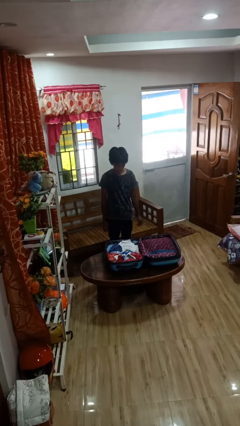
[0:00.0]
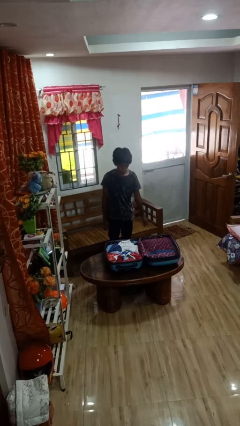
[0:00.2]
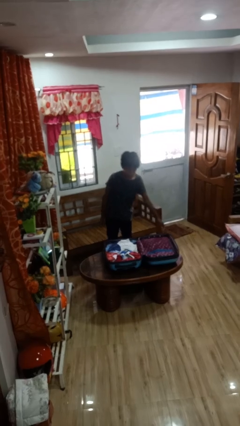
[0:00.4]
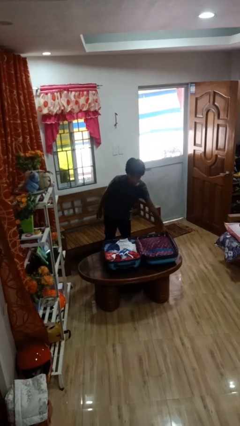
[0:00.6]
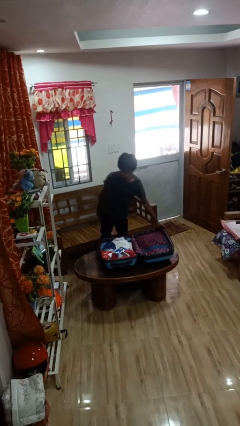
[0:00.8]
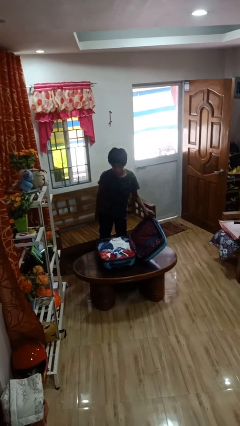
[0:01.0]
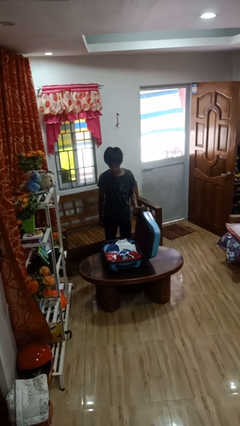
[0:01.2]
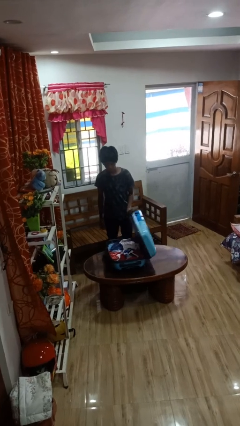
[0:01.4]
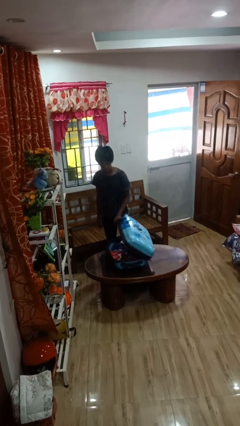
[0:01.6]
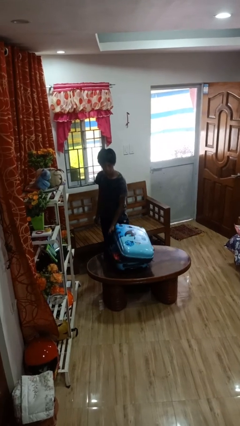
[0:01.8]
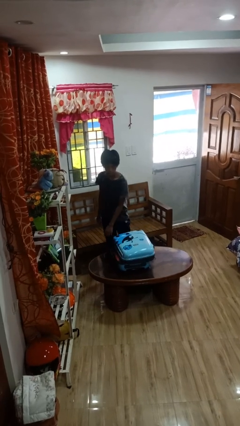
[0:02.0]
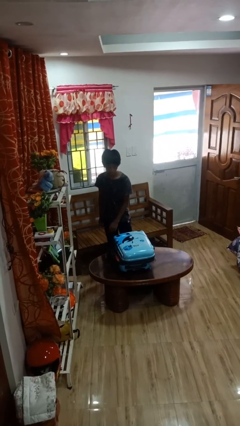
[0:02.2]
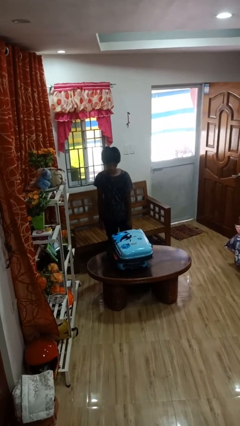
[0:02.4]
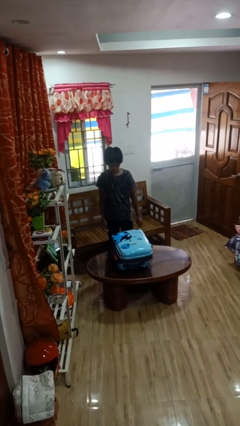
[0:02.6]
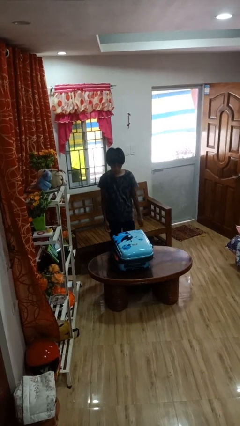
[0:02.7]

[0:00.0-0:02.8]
person closes suitcase

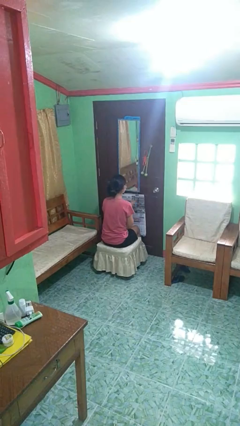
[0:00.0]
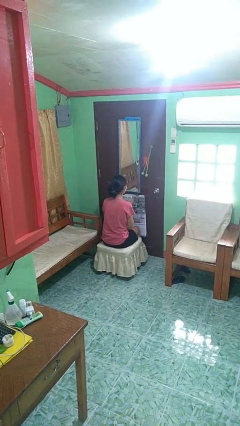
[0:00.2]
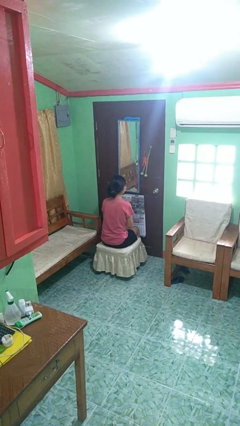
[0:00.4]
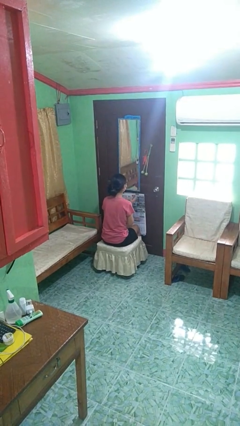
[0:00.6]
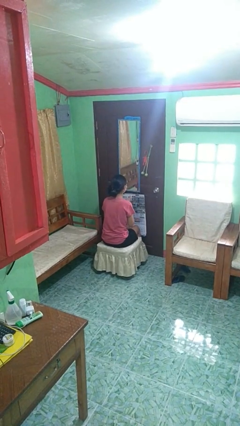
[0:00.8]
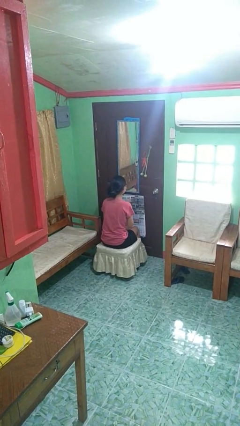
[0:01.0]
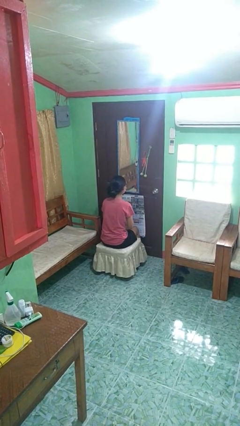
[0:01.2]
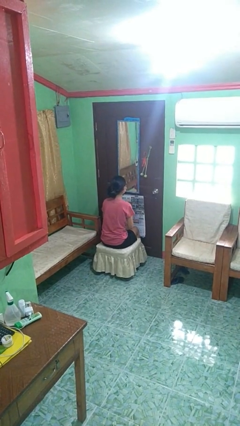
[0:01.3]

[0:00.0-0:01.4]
person claps hands

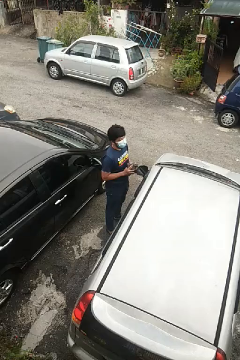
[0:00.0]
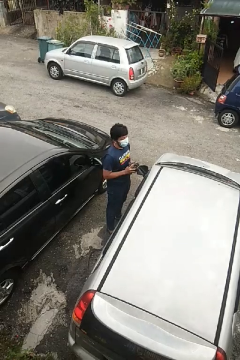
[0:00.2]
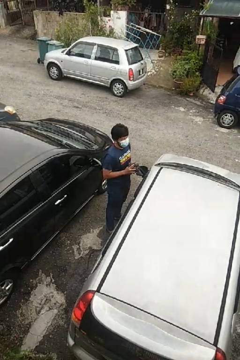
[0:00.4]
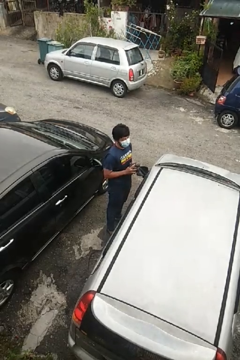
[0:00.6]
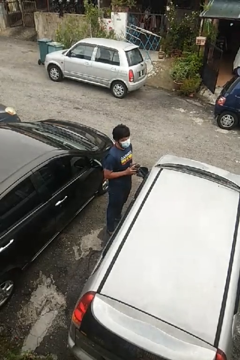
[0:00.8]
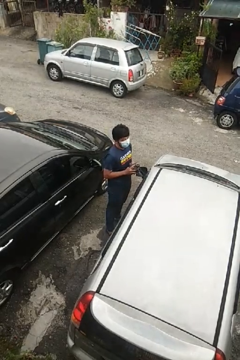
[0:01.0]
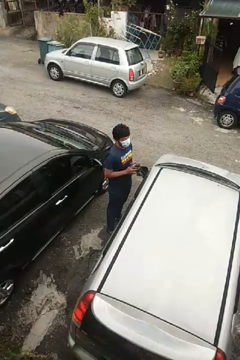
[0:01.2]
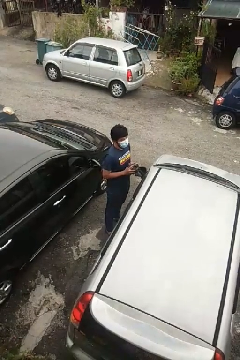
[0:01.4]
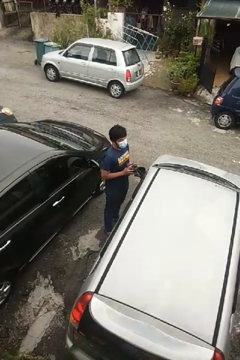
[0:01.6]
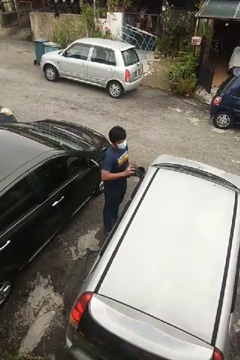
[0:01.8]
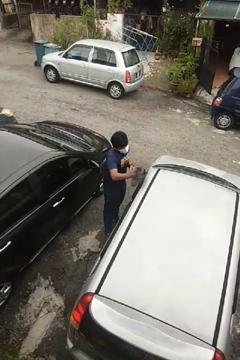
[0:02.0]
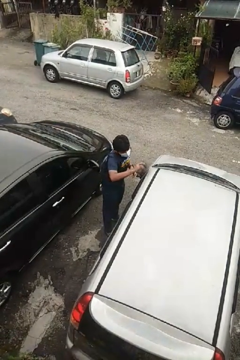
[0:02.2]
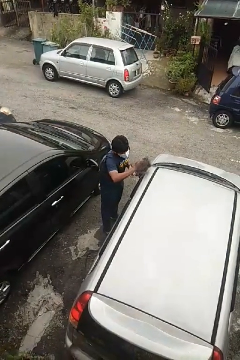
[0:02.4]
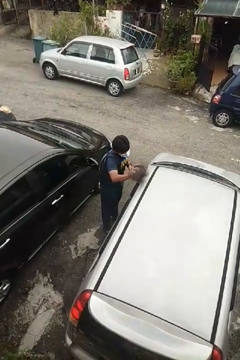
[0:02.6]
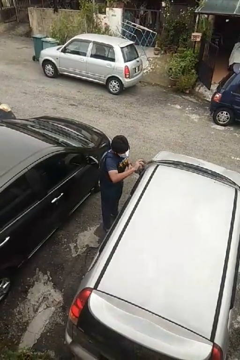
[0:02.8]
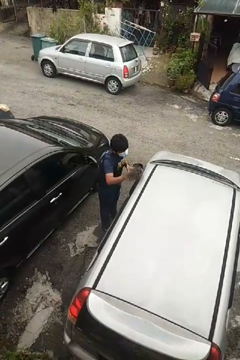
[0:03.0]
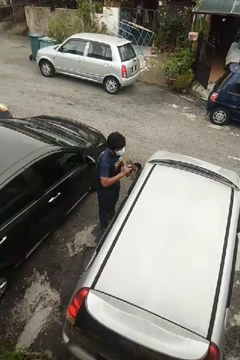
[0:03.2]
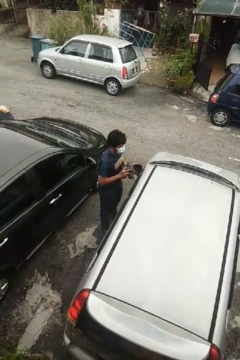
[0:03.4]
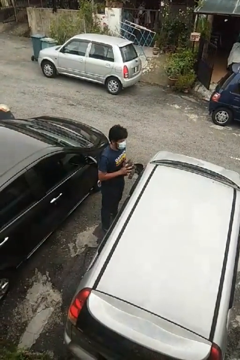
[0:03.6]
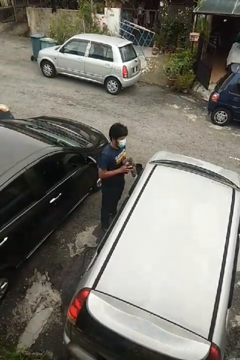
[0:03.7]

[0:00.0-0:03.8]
person polishes car with rag

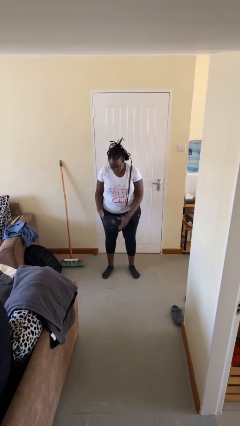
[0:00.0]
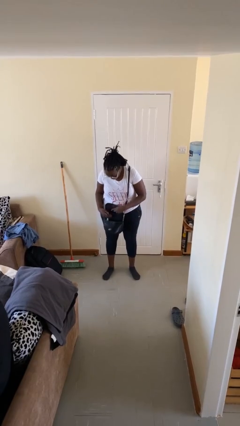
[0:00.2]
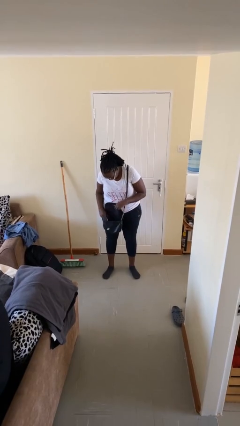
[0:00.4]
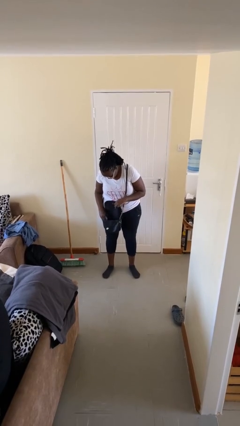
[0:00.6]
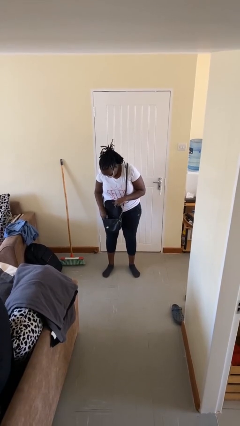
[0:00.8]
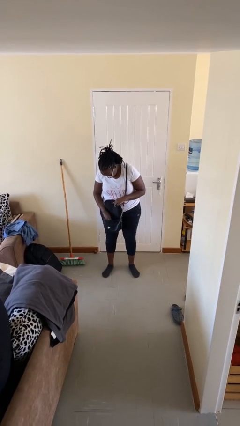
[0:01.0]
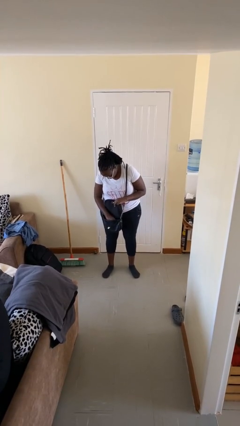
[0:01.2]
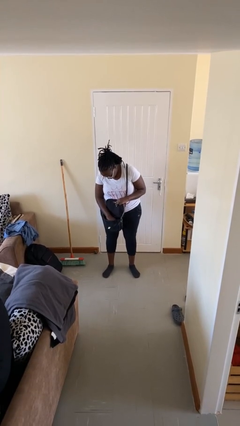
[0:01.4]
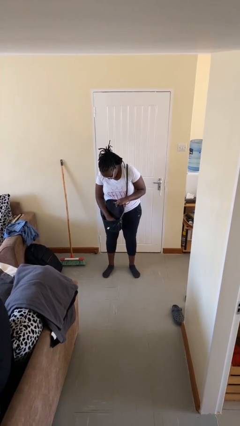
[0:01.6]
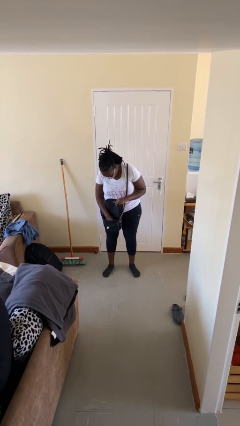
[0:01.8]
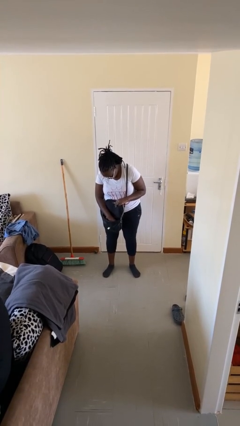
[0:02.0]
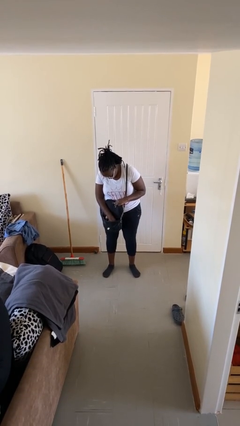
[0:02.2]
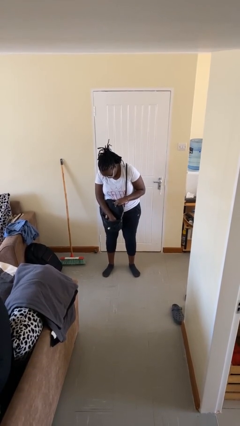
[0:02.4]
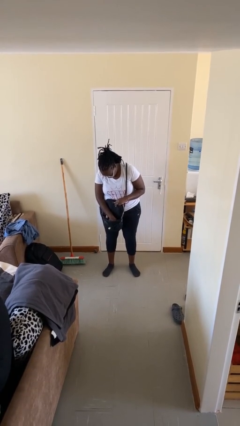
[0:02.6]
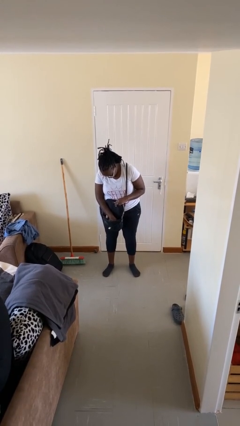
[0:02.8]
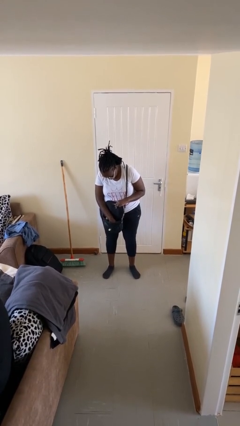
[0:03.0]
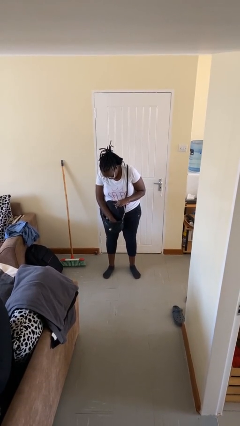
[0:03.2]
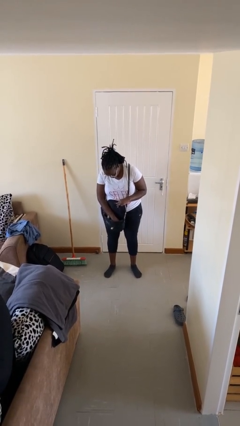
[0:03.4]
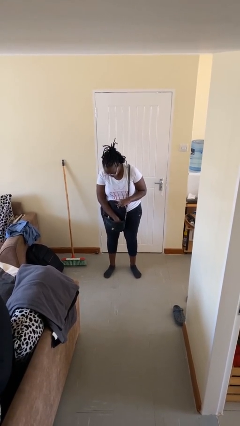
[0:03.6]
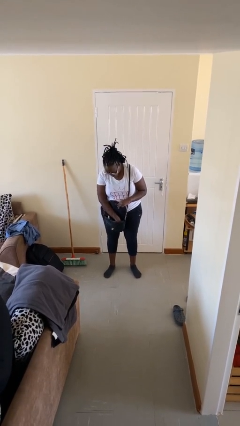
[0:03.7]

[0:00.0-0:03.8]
person searches in purse

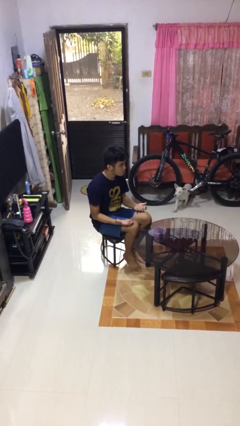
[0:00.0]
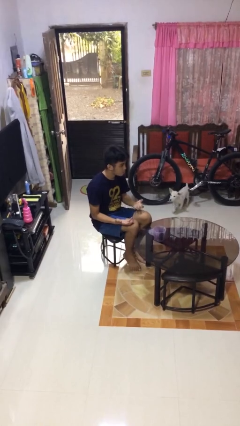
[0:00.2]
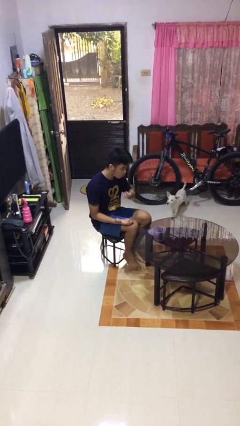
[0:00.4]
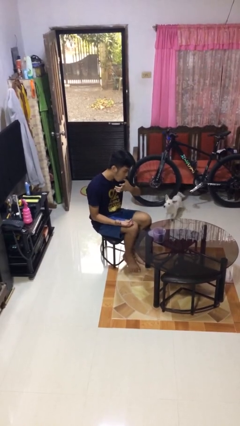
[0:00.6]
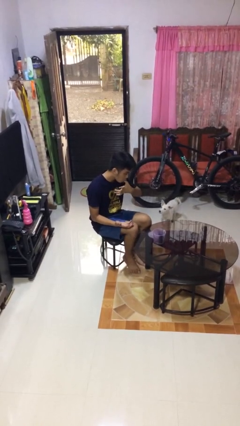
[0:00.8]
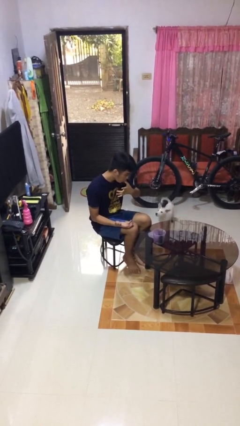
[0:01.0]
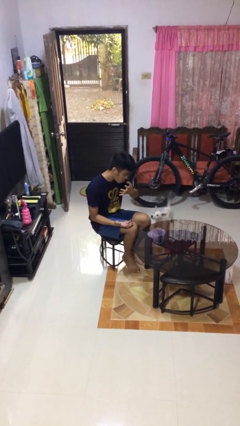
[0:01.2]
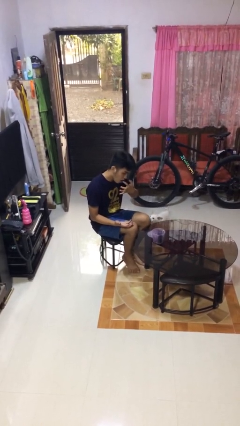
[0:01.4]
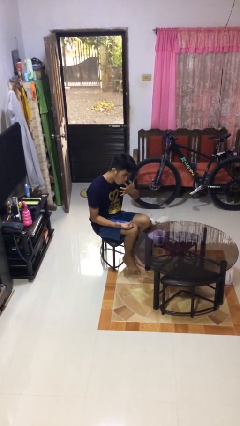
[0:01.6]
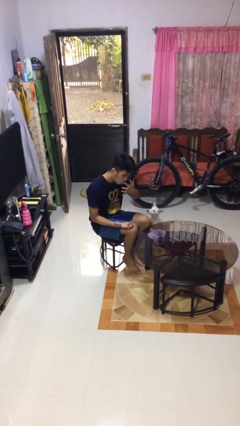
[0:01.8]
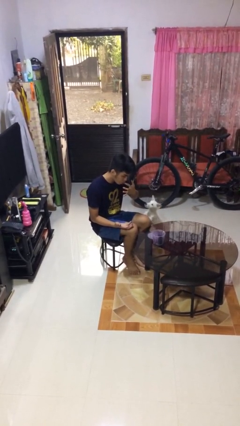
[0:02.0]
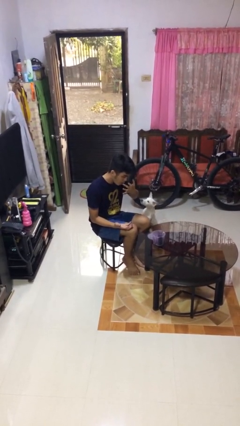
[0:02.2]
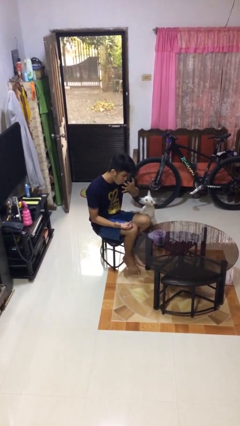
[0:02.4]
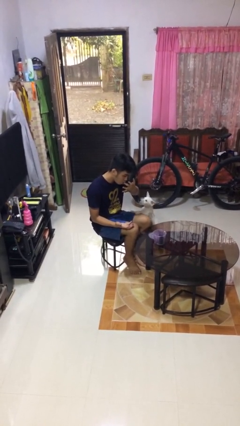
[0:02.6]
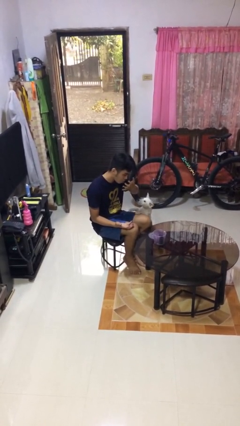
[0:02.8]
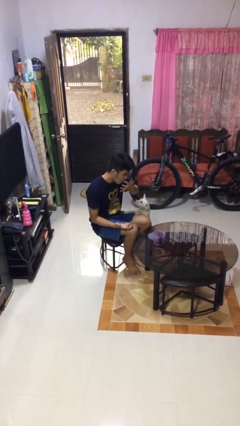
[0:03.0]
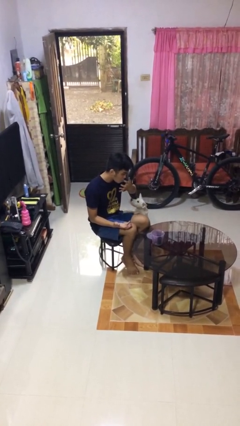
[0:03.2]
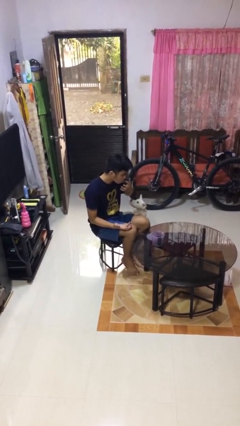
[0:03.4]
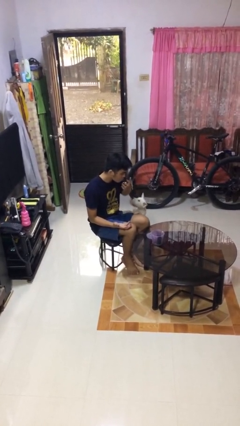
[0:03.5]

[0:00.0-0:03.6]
person licks fingers

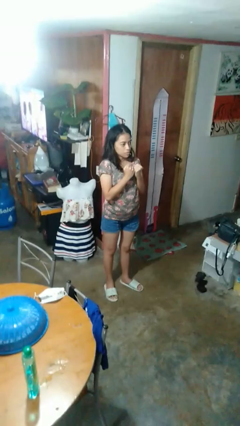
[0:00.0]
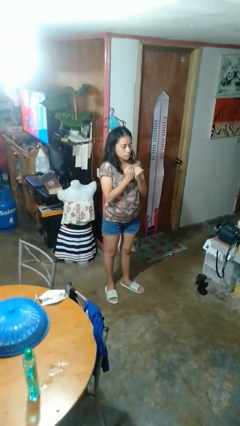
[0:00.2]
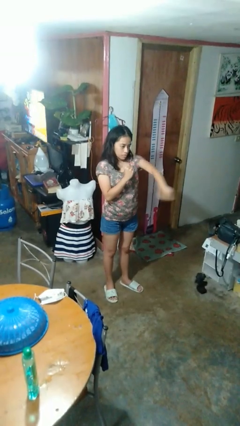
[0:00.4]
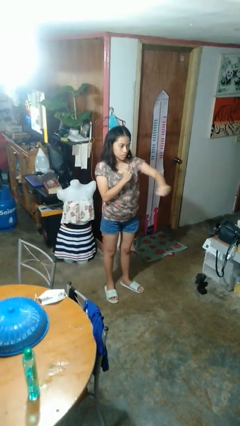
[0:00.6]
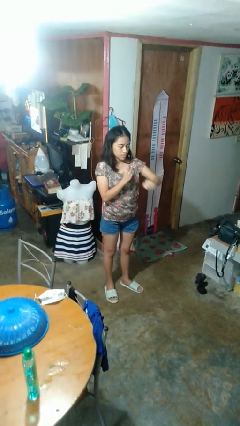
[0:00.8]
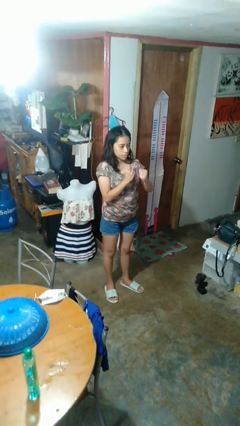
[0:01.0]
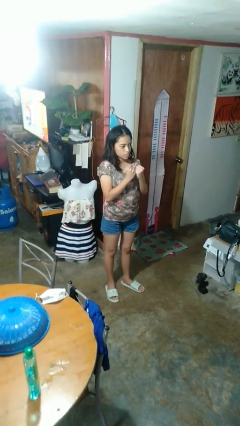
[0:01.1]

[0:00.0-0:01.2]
person punches

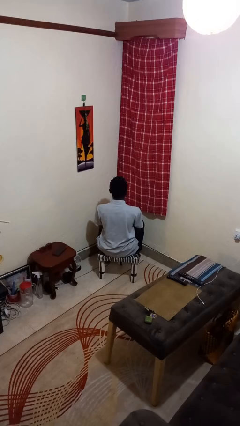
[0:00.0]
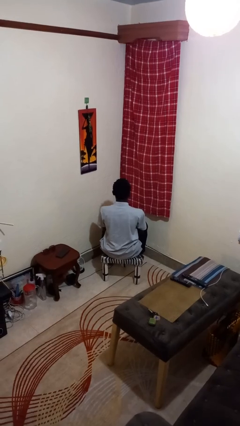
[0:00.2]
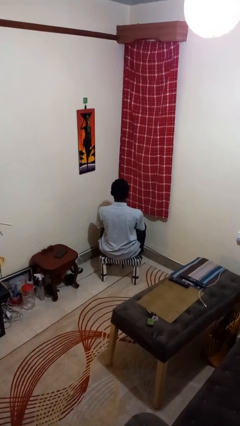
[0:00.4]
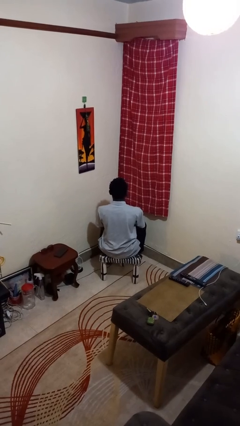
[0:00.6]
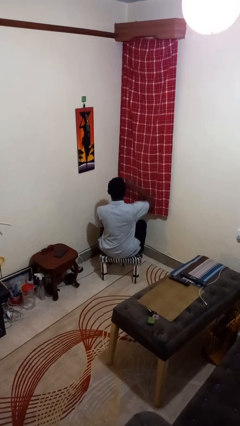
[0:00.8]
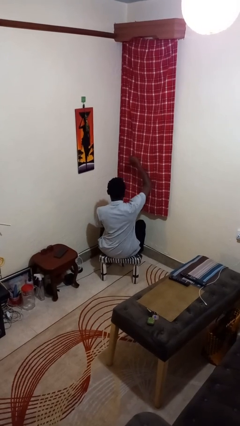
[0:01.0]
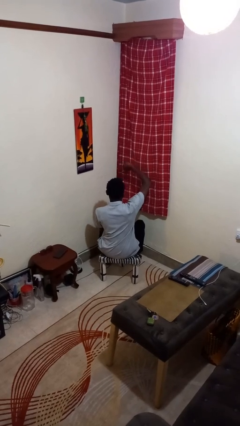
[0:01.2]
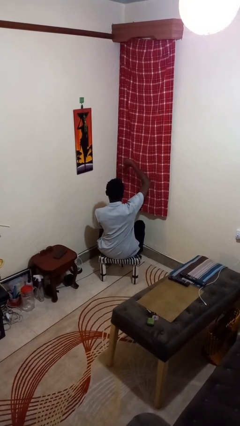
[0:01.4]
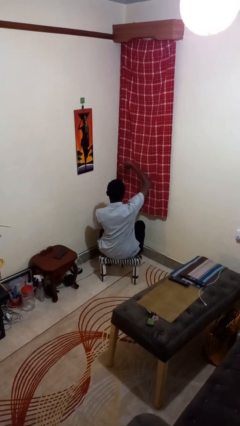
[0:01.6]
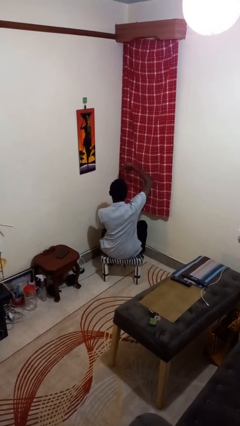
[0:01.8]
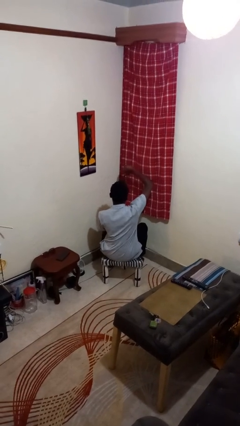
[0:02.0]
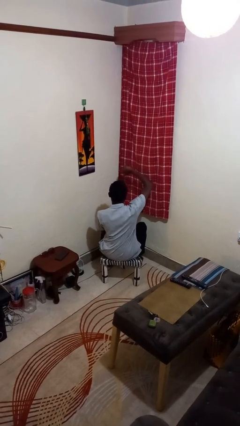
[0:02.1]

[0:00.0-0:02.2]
person gestures thumbs down
